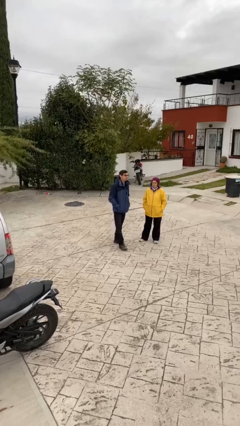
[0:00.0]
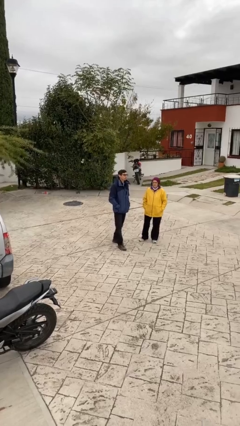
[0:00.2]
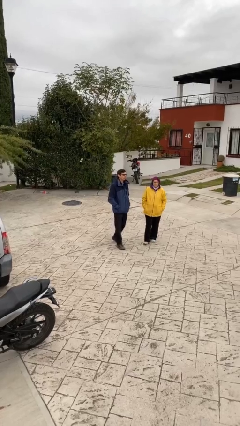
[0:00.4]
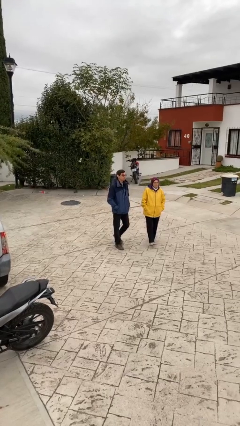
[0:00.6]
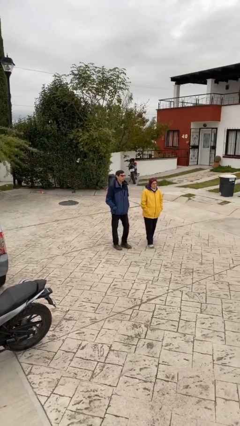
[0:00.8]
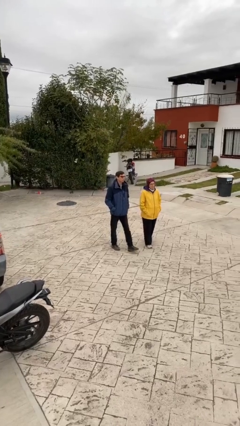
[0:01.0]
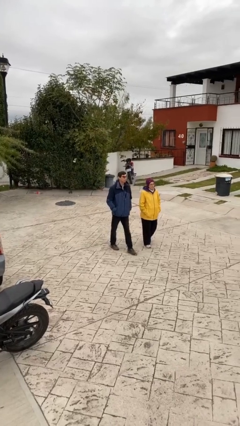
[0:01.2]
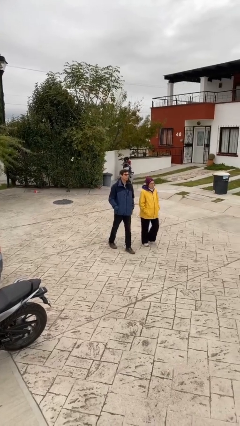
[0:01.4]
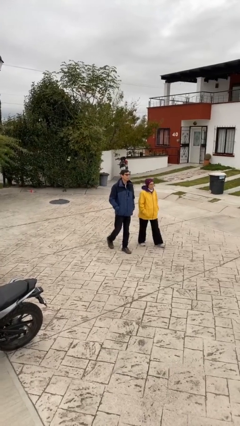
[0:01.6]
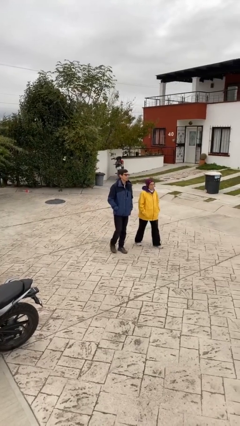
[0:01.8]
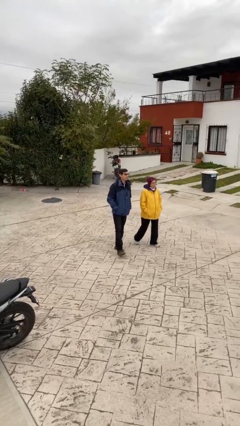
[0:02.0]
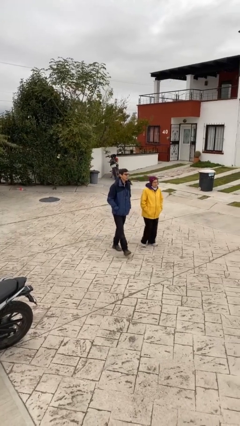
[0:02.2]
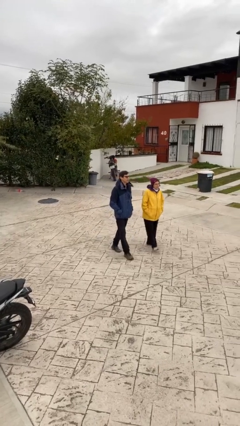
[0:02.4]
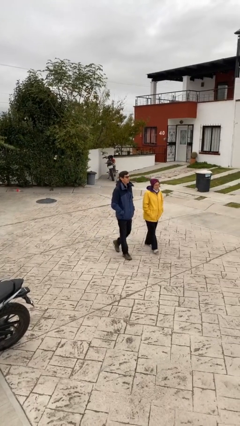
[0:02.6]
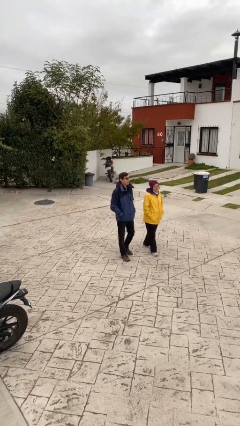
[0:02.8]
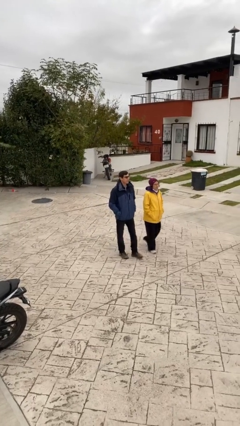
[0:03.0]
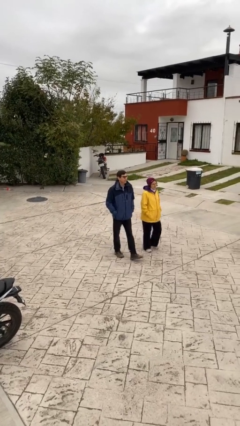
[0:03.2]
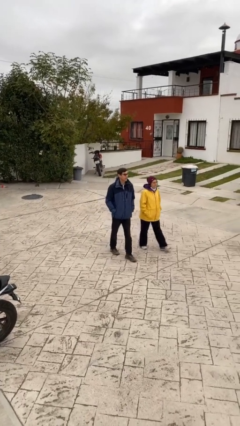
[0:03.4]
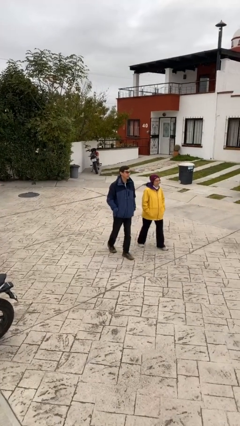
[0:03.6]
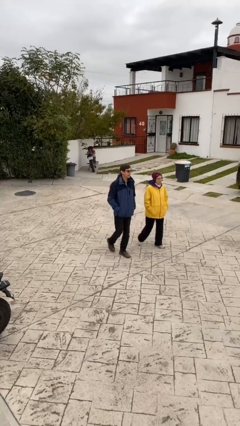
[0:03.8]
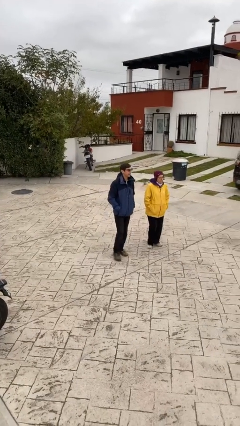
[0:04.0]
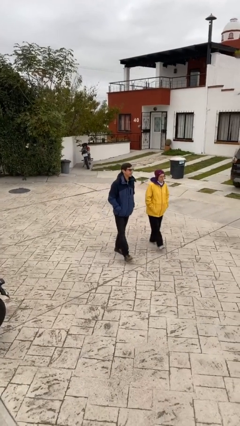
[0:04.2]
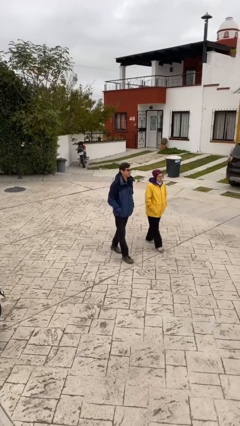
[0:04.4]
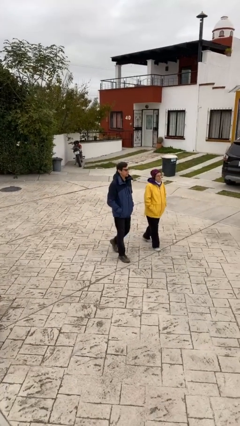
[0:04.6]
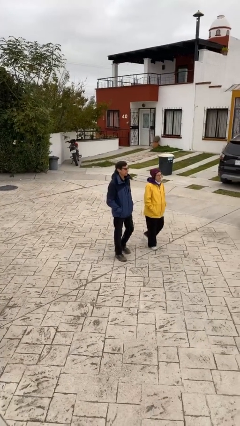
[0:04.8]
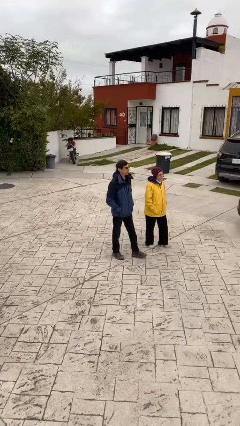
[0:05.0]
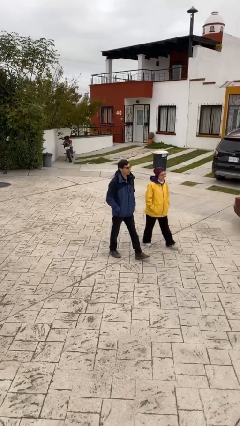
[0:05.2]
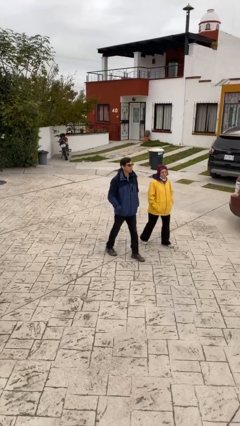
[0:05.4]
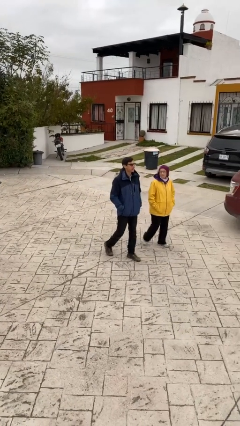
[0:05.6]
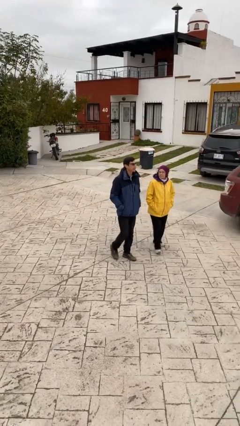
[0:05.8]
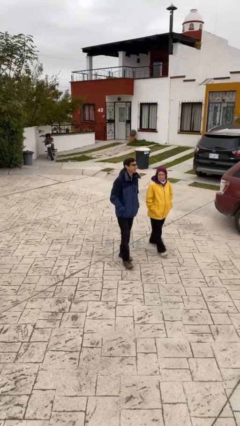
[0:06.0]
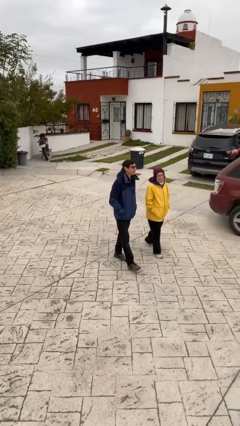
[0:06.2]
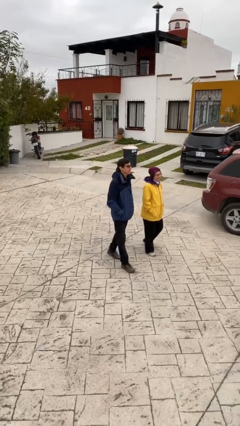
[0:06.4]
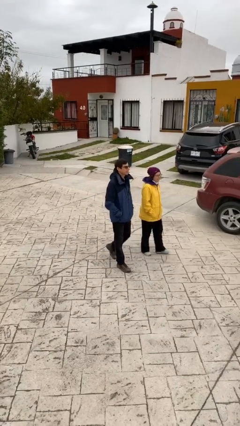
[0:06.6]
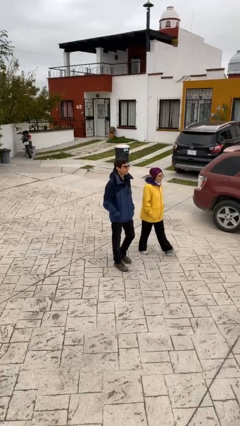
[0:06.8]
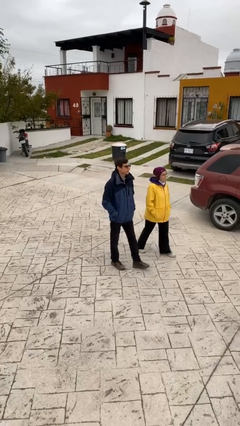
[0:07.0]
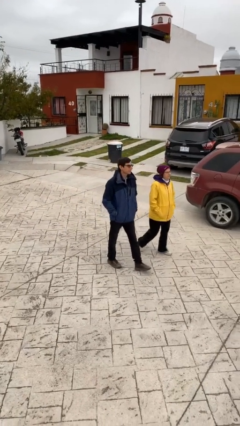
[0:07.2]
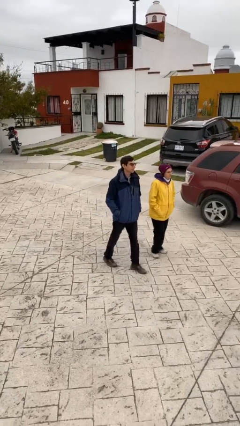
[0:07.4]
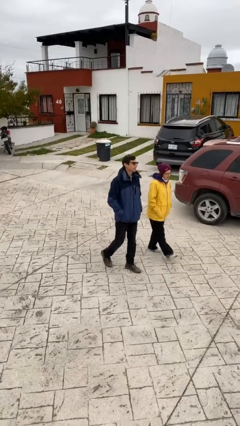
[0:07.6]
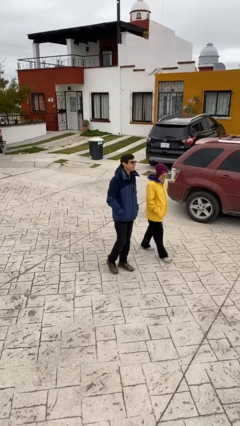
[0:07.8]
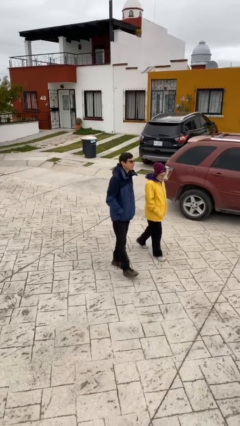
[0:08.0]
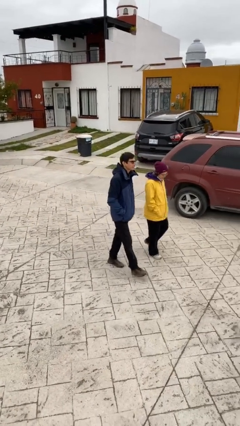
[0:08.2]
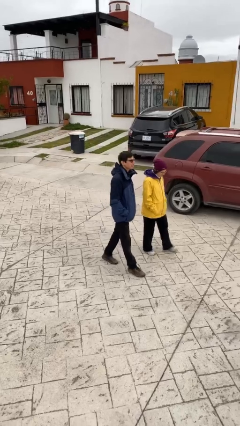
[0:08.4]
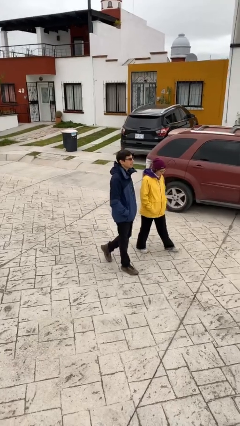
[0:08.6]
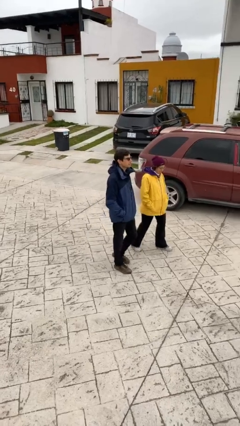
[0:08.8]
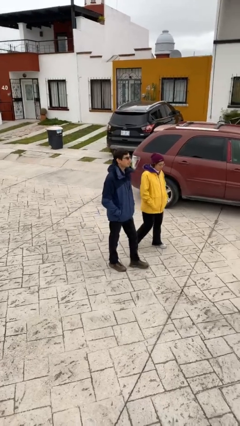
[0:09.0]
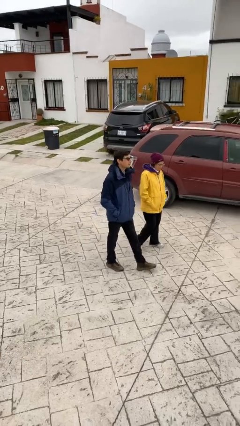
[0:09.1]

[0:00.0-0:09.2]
person talks to person

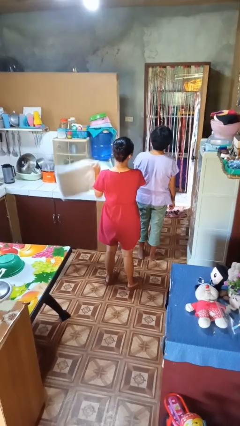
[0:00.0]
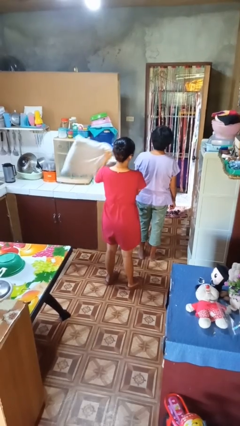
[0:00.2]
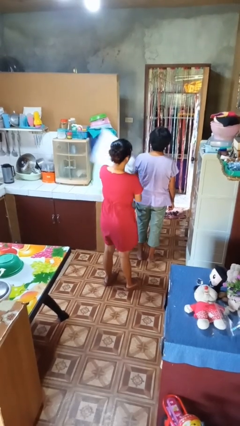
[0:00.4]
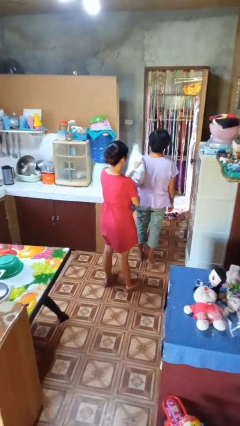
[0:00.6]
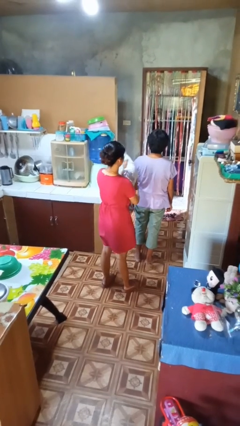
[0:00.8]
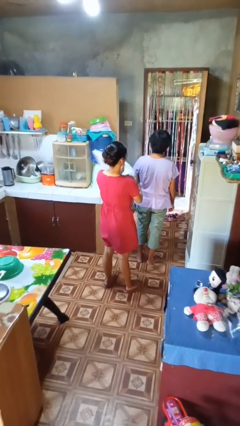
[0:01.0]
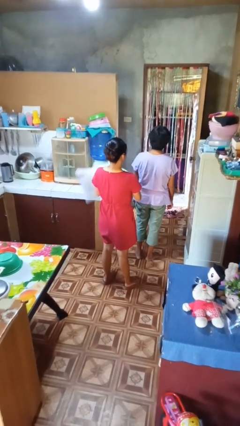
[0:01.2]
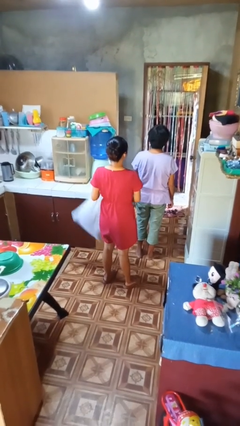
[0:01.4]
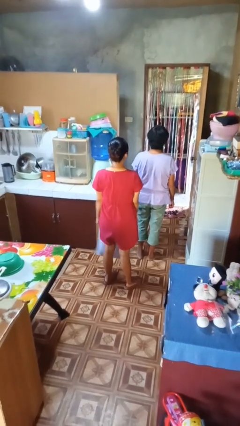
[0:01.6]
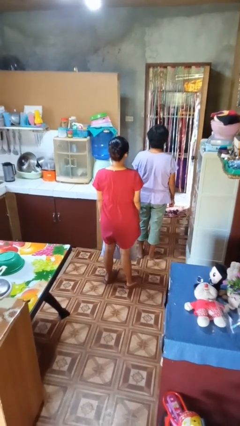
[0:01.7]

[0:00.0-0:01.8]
person hits person with pillow

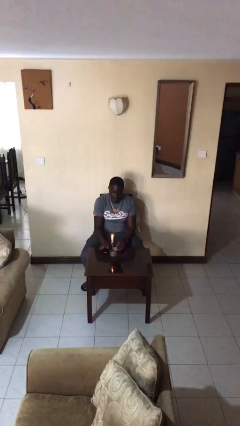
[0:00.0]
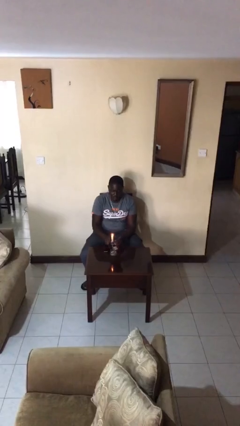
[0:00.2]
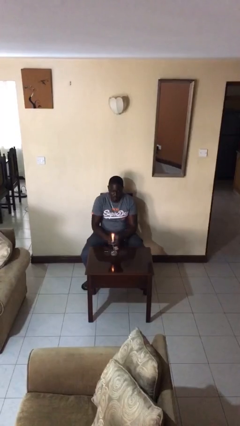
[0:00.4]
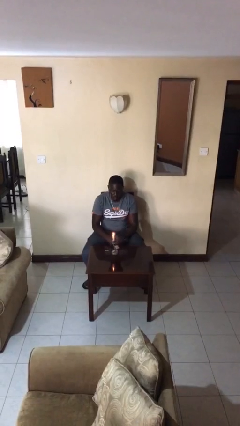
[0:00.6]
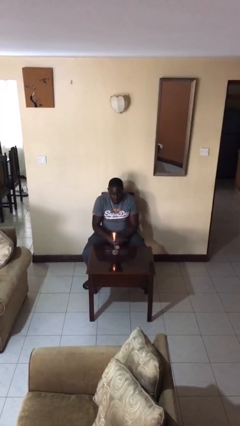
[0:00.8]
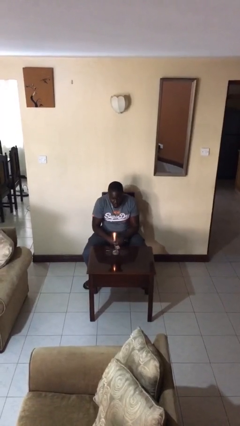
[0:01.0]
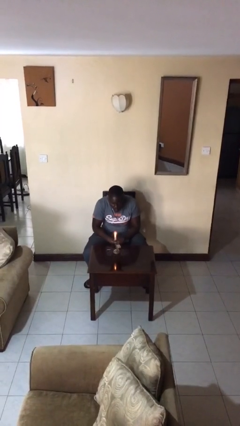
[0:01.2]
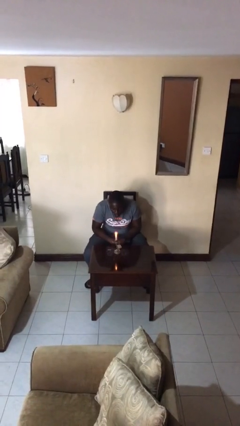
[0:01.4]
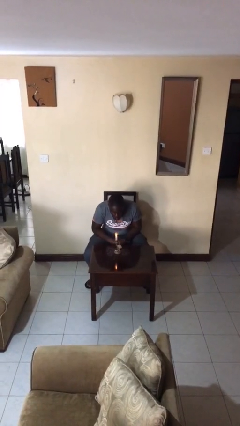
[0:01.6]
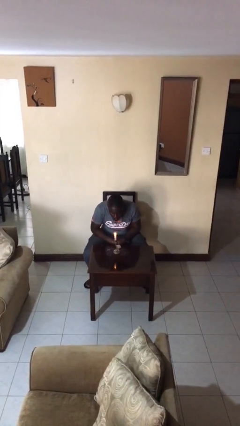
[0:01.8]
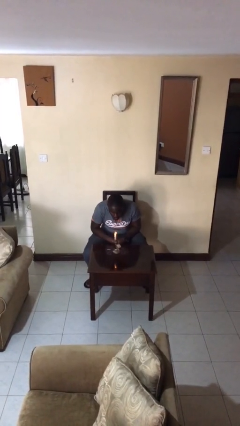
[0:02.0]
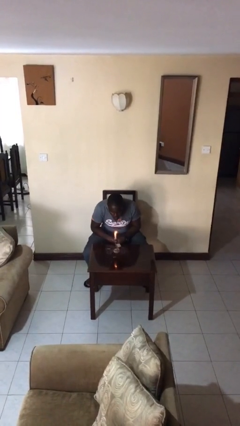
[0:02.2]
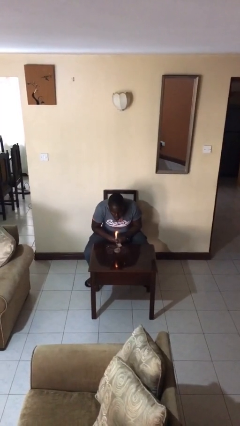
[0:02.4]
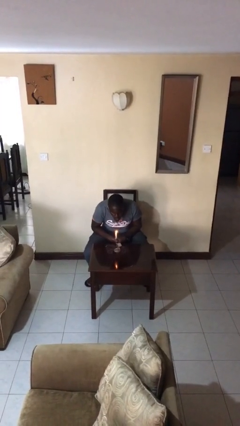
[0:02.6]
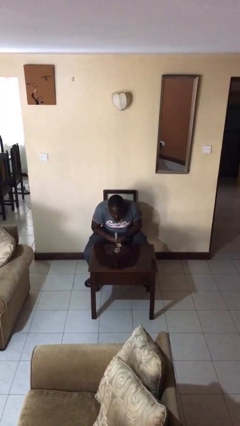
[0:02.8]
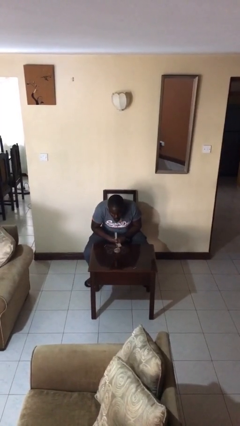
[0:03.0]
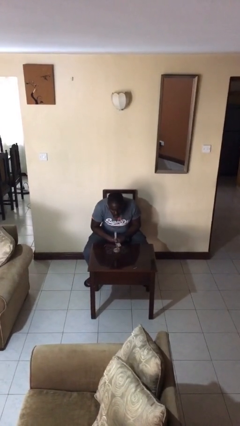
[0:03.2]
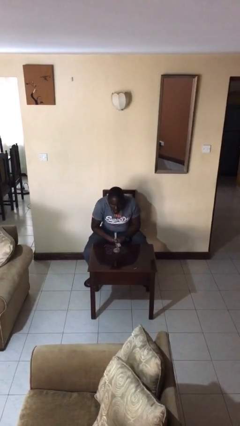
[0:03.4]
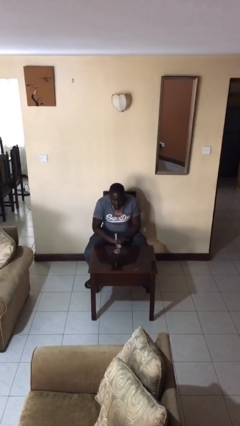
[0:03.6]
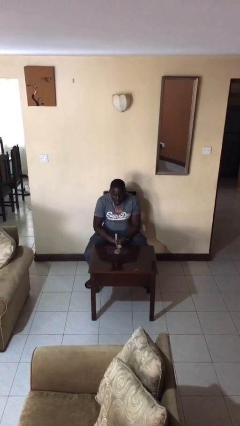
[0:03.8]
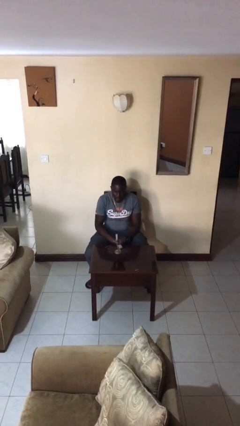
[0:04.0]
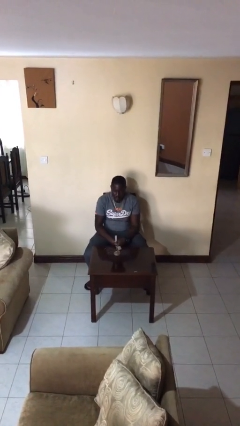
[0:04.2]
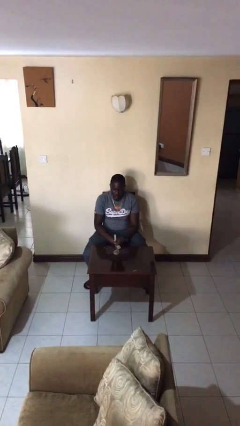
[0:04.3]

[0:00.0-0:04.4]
person extinguishes candle

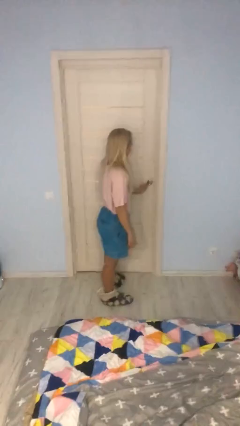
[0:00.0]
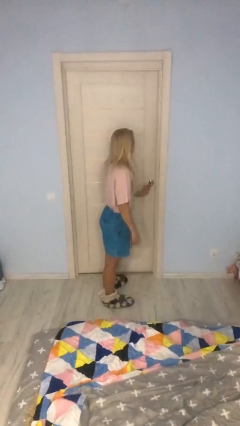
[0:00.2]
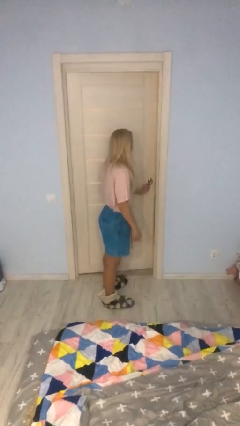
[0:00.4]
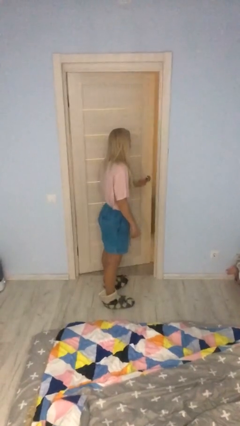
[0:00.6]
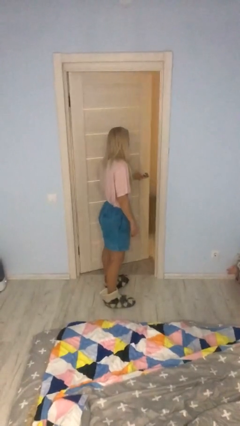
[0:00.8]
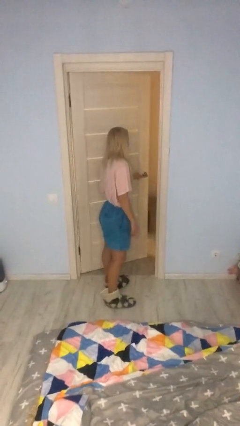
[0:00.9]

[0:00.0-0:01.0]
person opens facility door

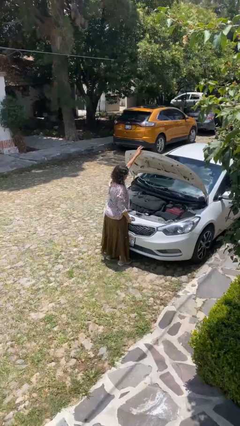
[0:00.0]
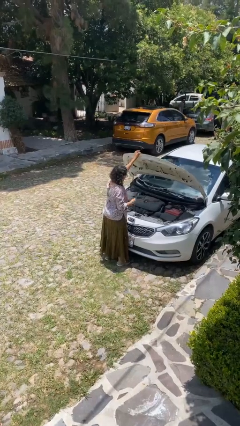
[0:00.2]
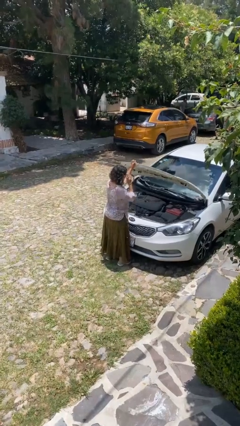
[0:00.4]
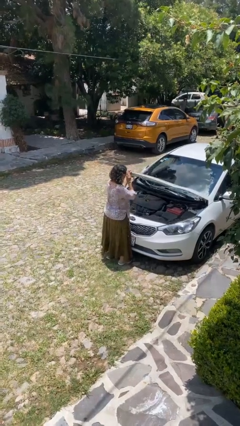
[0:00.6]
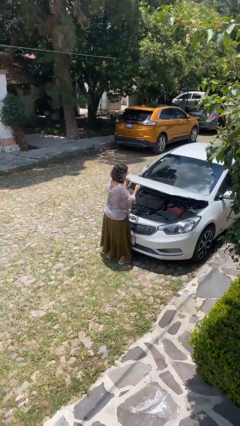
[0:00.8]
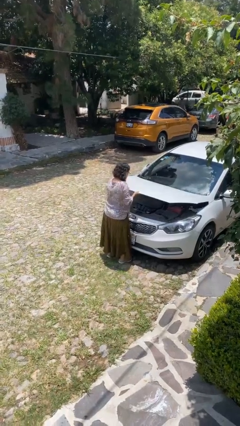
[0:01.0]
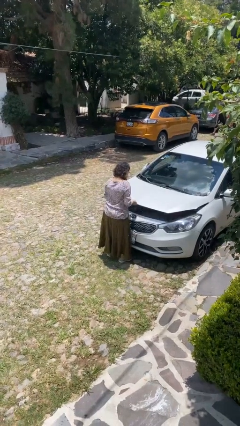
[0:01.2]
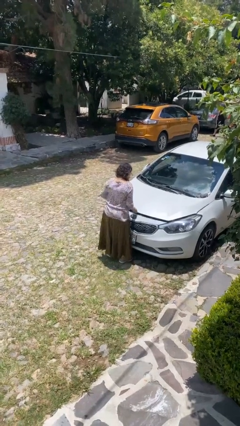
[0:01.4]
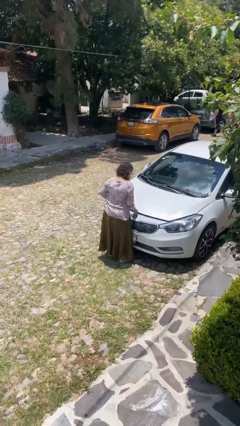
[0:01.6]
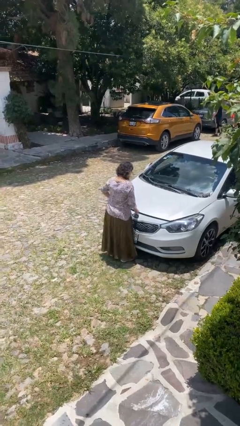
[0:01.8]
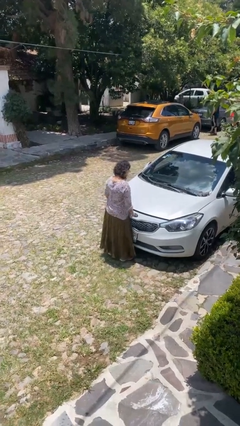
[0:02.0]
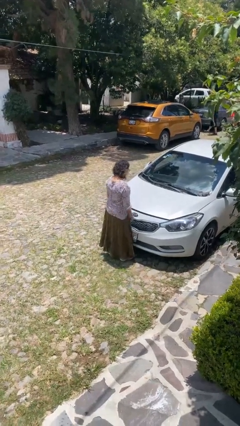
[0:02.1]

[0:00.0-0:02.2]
person closes car hood
